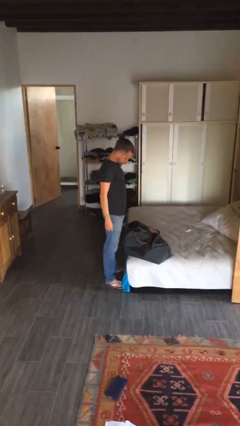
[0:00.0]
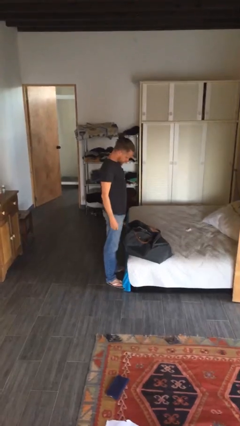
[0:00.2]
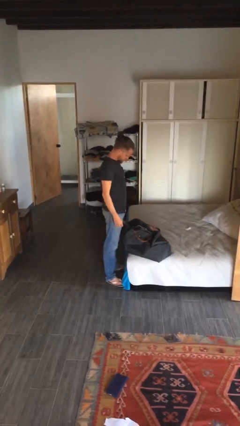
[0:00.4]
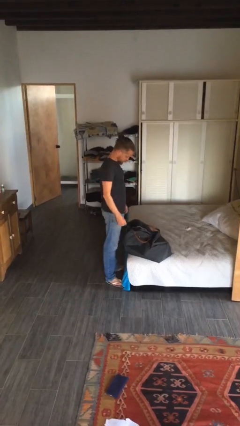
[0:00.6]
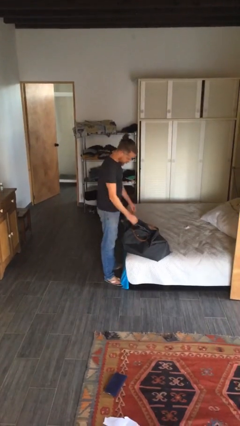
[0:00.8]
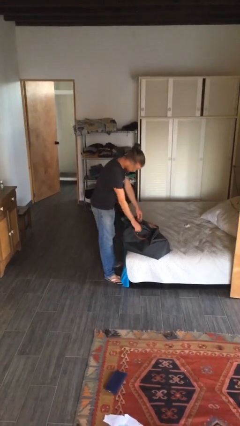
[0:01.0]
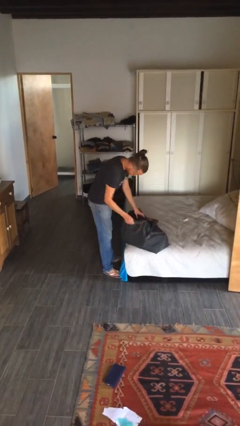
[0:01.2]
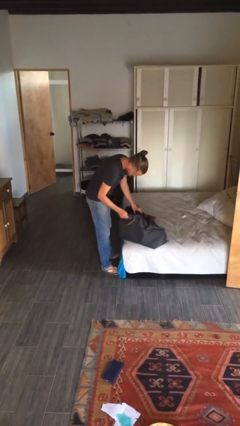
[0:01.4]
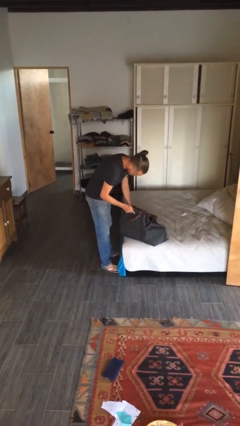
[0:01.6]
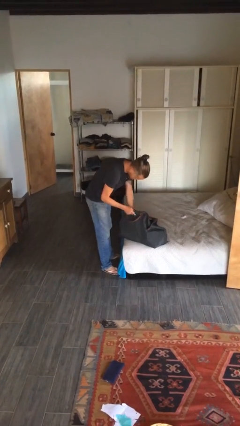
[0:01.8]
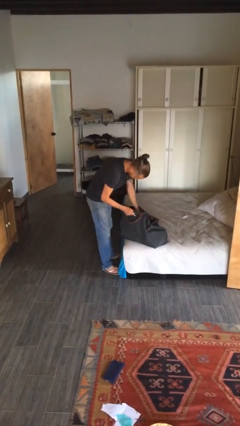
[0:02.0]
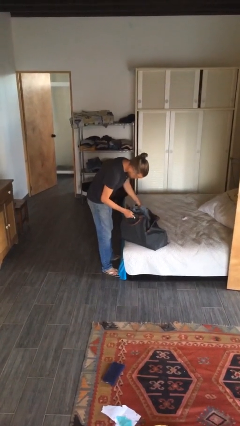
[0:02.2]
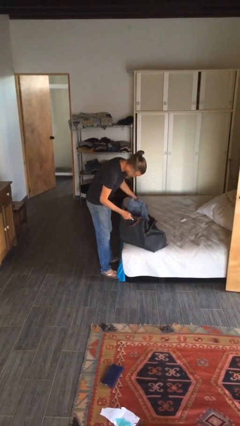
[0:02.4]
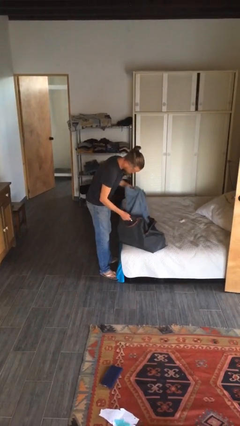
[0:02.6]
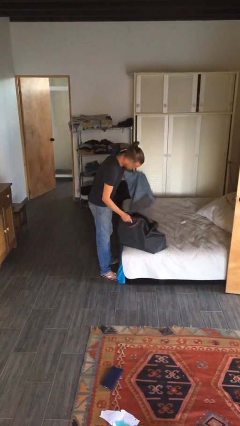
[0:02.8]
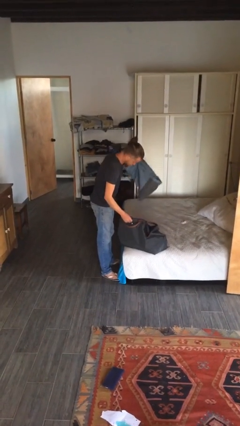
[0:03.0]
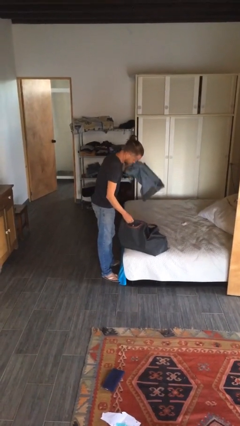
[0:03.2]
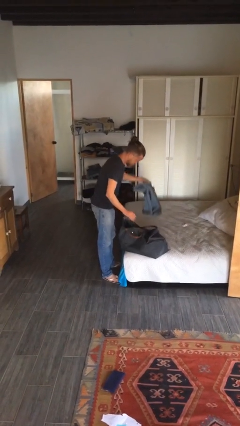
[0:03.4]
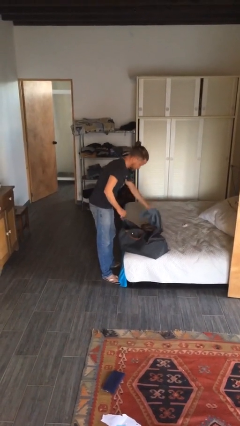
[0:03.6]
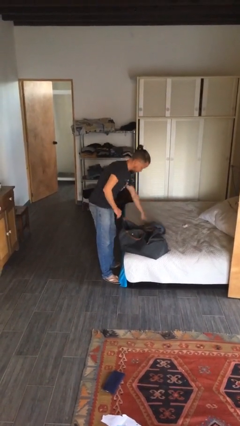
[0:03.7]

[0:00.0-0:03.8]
person unloads clothes from suitcase

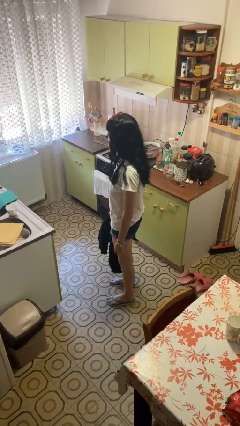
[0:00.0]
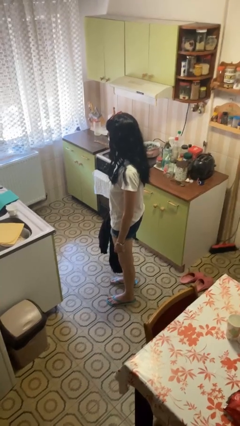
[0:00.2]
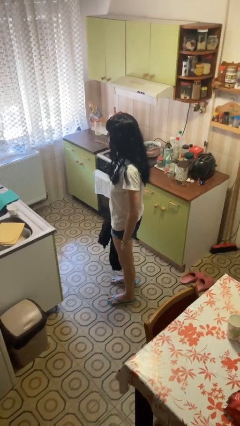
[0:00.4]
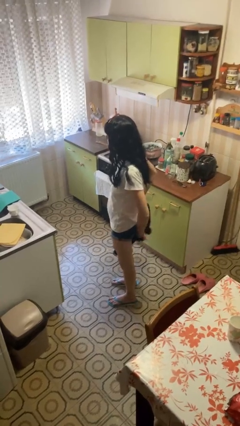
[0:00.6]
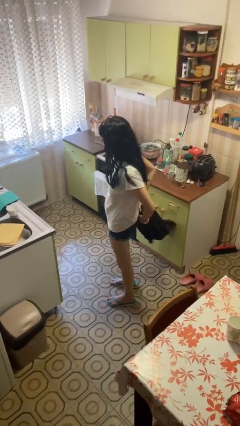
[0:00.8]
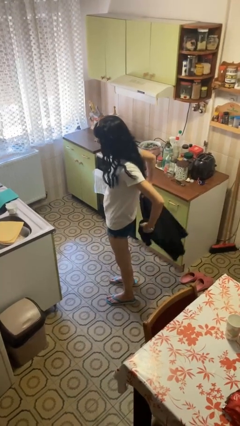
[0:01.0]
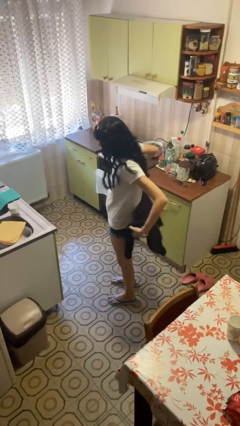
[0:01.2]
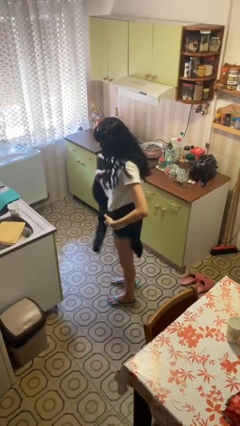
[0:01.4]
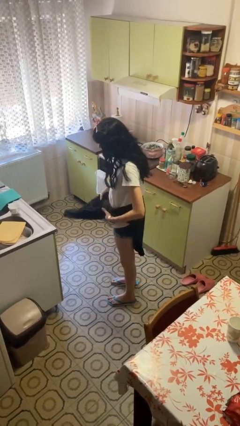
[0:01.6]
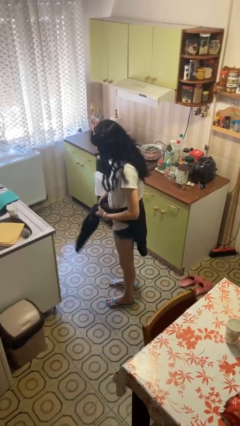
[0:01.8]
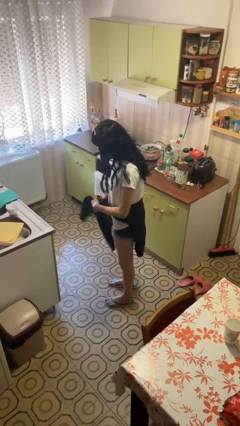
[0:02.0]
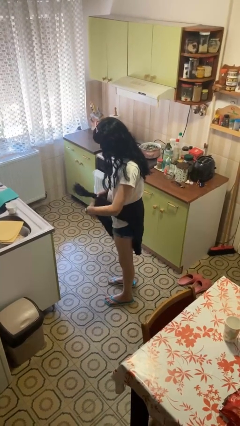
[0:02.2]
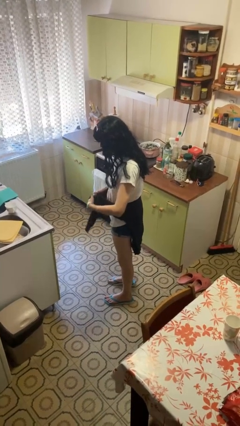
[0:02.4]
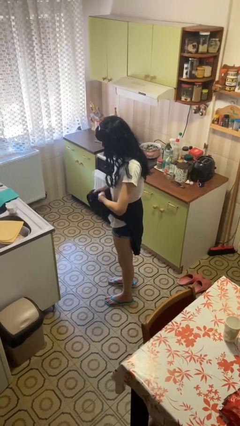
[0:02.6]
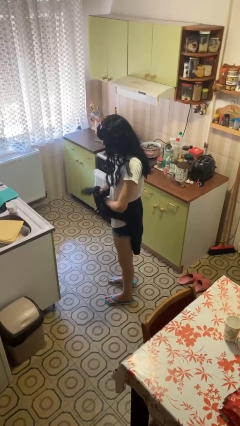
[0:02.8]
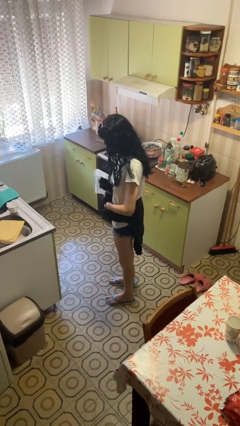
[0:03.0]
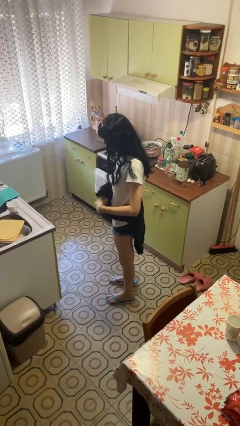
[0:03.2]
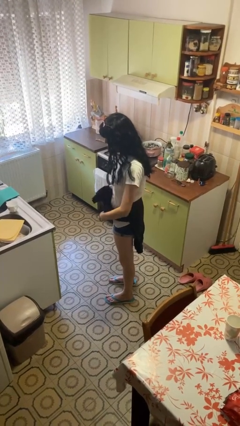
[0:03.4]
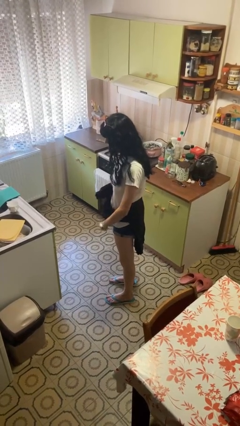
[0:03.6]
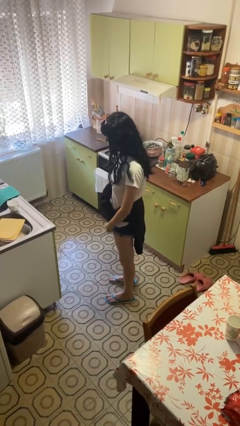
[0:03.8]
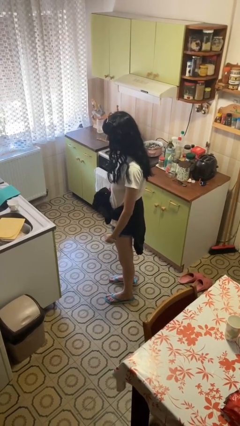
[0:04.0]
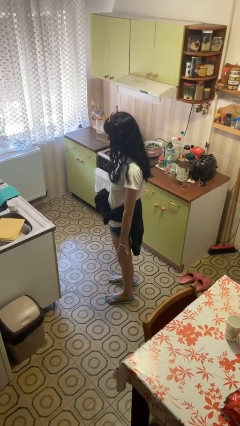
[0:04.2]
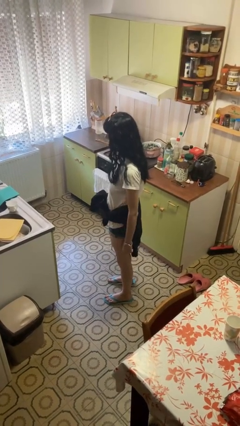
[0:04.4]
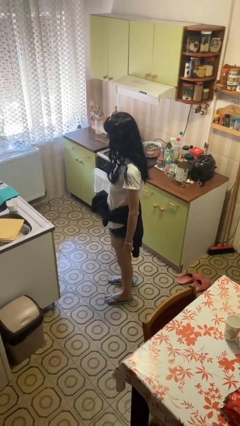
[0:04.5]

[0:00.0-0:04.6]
person ties jacket around waist

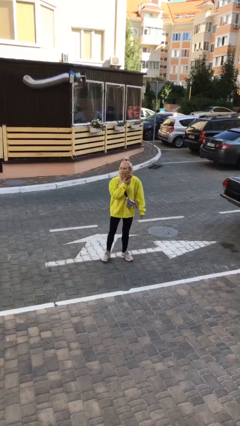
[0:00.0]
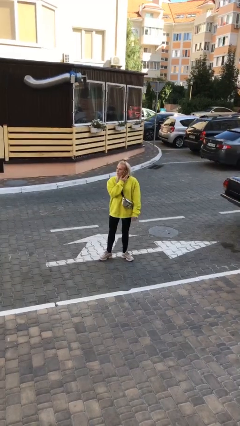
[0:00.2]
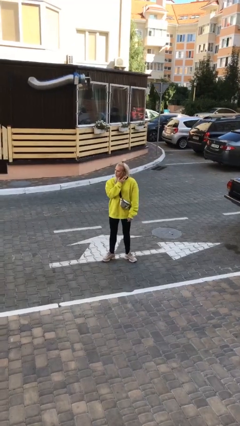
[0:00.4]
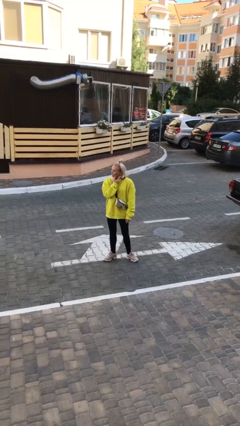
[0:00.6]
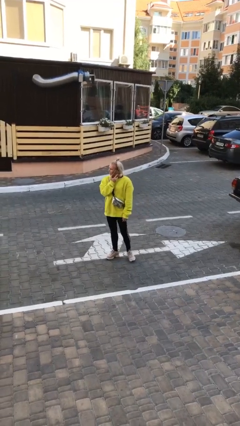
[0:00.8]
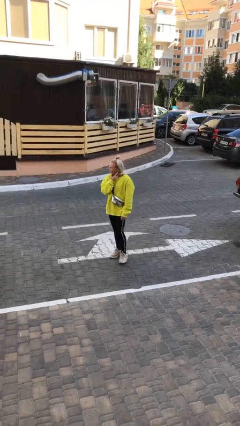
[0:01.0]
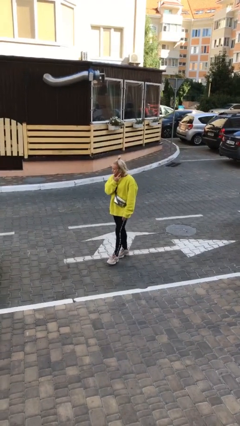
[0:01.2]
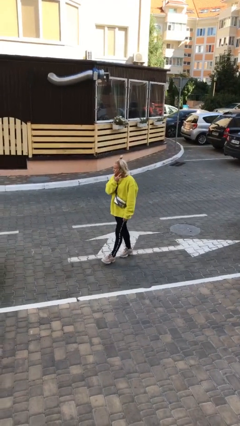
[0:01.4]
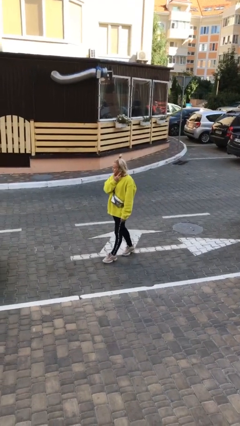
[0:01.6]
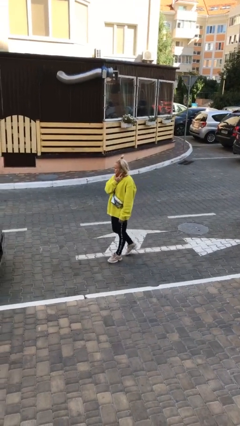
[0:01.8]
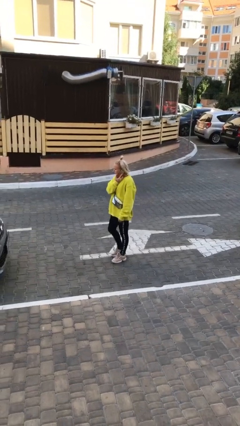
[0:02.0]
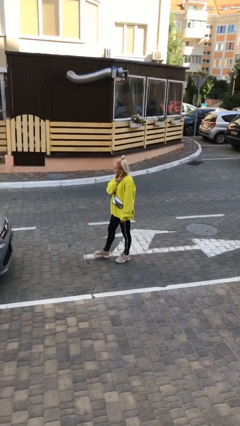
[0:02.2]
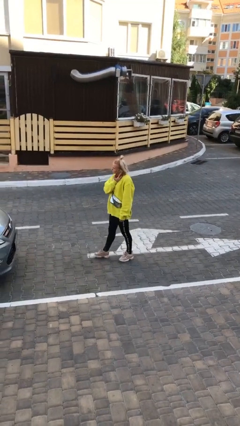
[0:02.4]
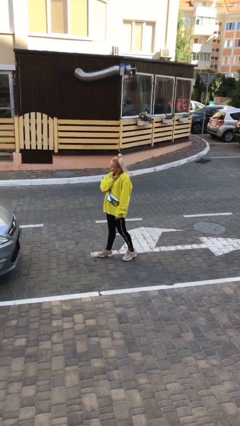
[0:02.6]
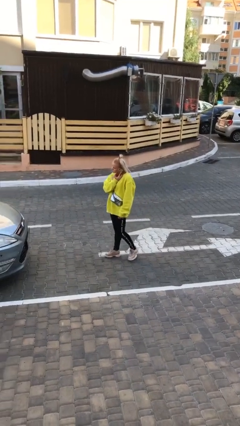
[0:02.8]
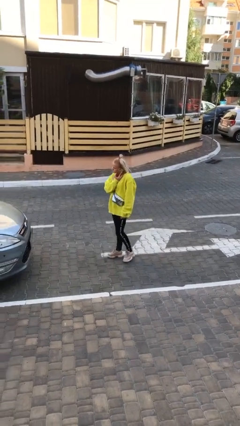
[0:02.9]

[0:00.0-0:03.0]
person talks on phone

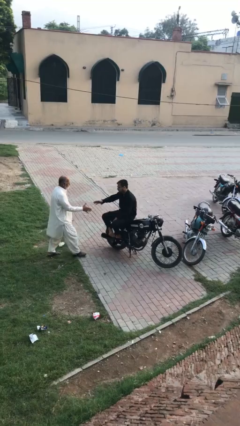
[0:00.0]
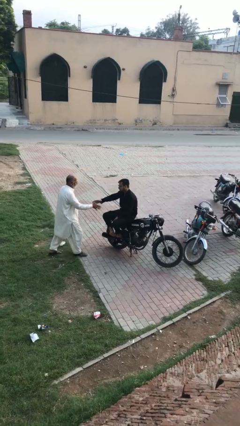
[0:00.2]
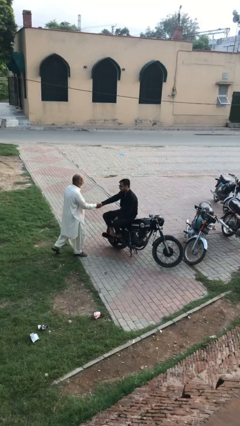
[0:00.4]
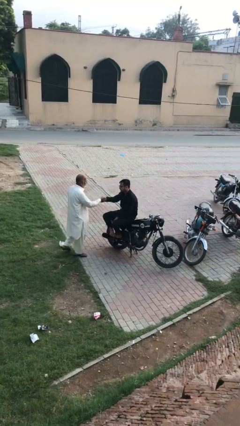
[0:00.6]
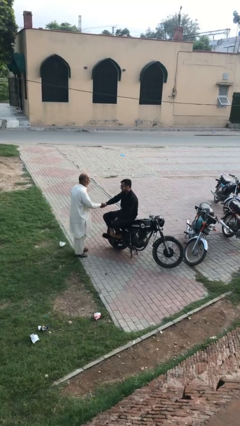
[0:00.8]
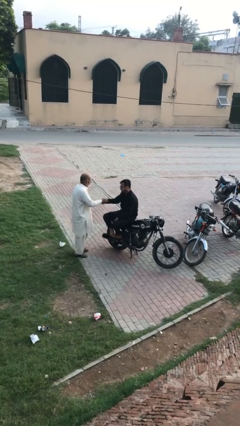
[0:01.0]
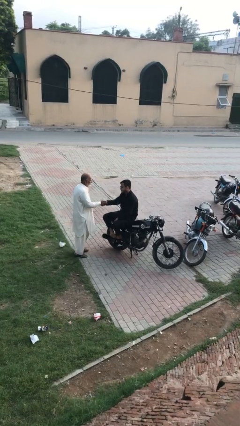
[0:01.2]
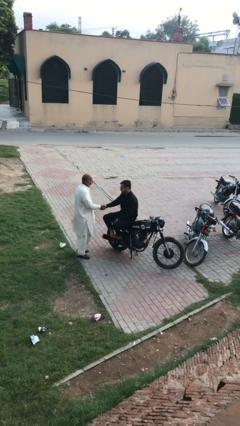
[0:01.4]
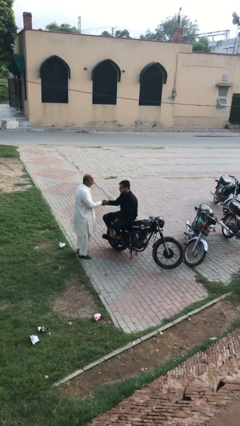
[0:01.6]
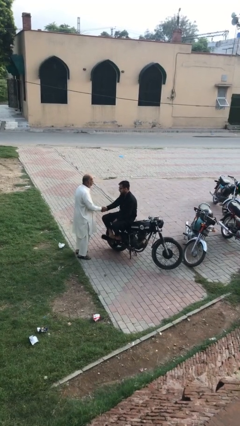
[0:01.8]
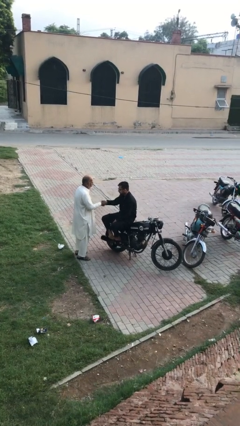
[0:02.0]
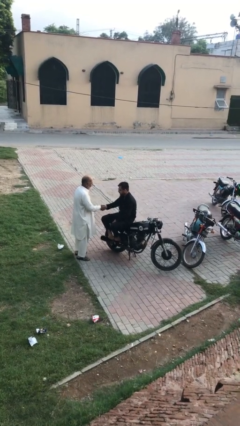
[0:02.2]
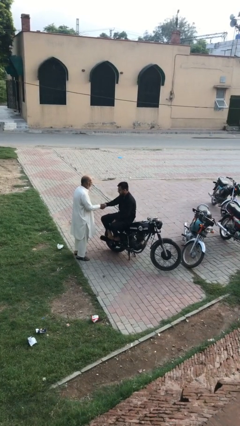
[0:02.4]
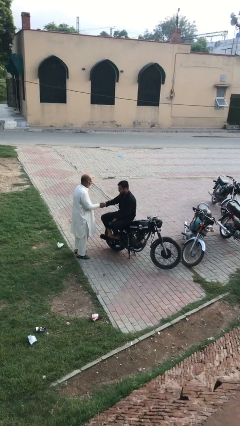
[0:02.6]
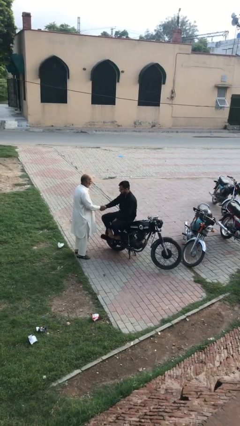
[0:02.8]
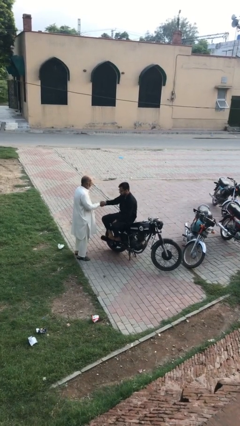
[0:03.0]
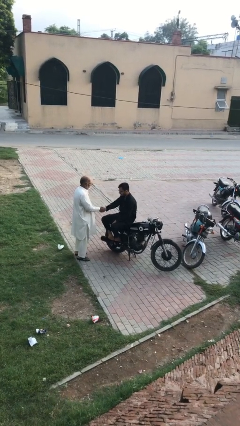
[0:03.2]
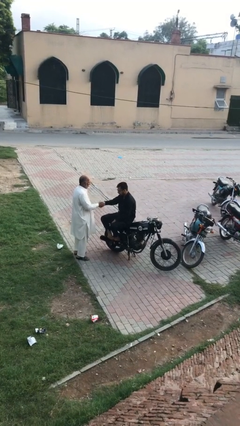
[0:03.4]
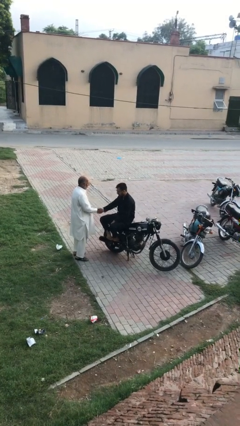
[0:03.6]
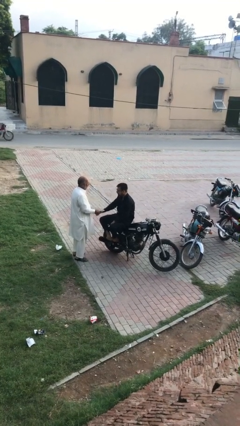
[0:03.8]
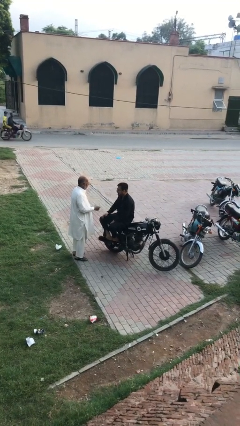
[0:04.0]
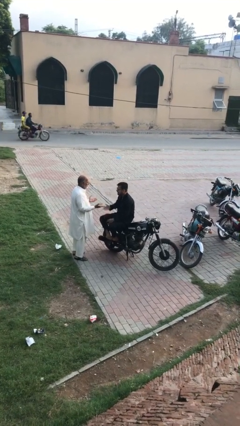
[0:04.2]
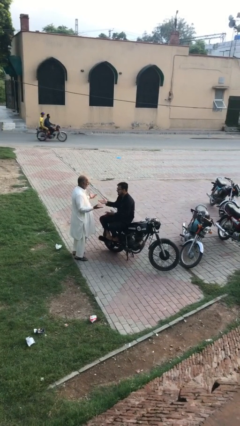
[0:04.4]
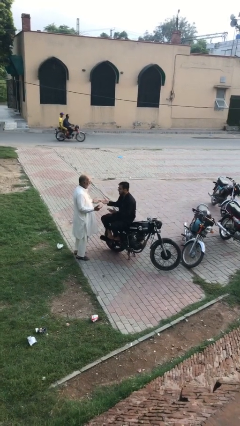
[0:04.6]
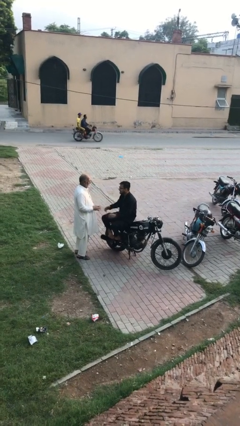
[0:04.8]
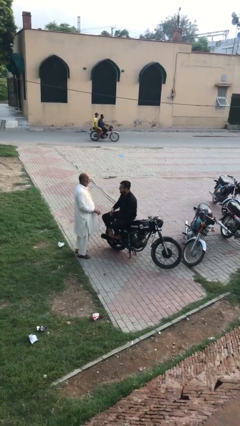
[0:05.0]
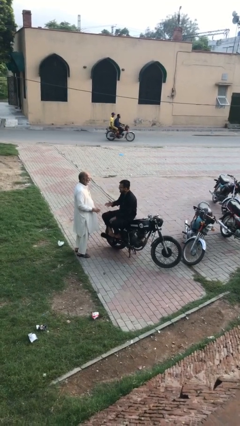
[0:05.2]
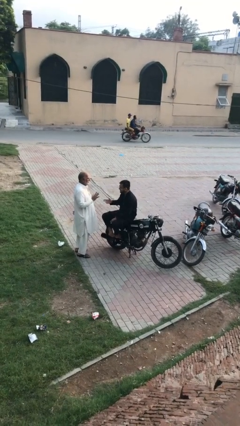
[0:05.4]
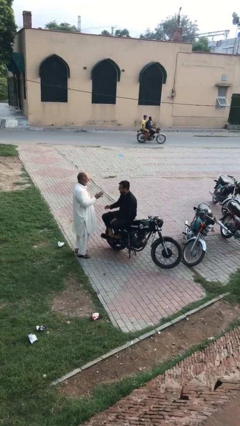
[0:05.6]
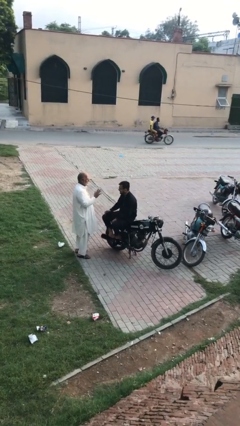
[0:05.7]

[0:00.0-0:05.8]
person shakes hand

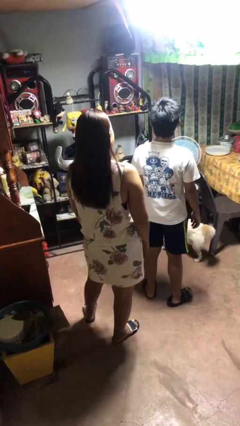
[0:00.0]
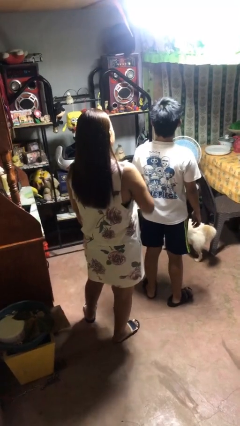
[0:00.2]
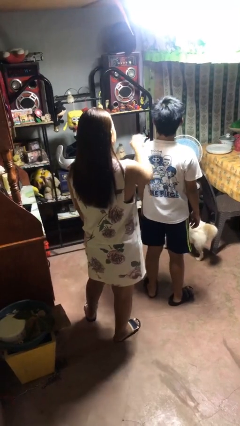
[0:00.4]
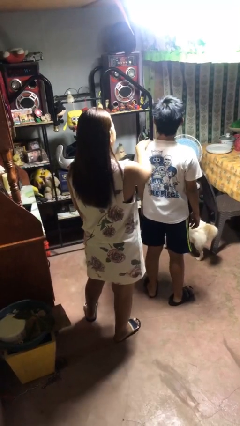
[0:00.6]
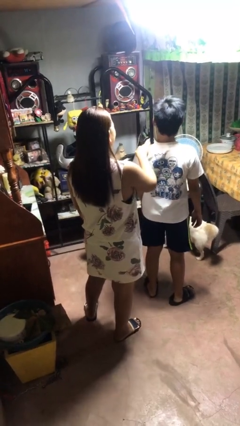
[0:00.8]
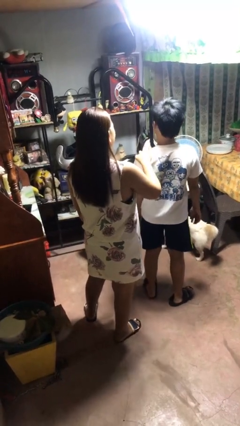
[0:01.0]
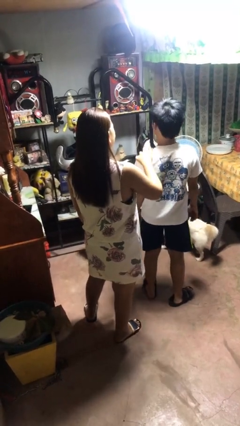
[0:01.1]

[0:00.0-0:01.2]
person grabs person by shoulder
